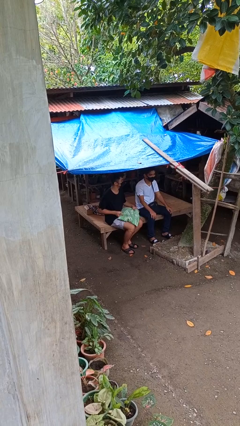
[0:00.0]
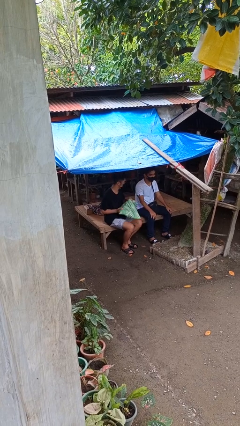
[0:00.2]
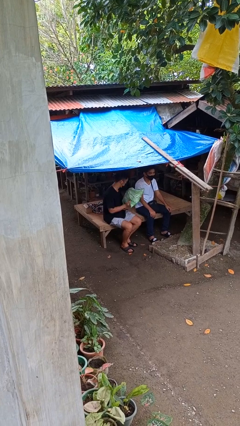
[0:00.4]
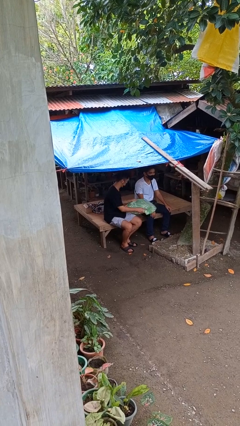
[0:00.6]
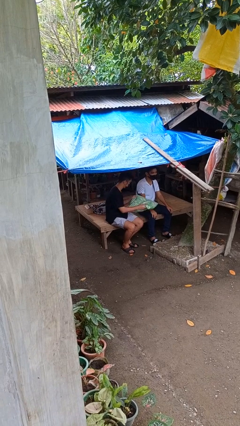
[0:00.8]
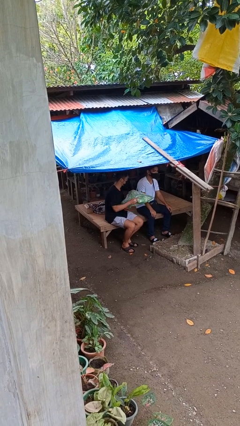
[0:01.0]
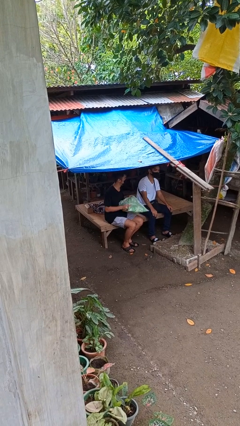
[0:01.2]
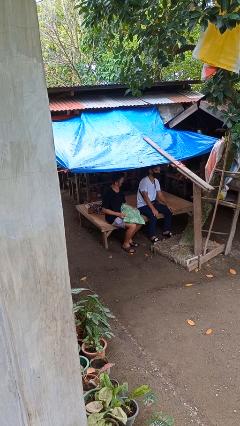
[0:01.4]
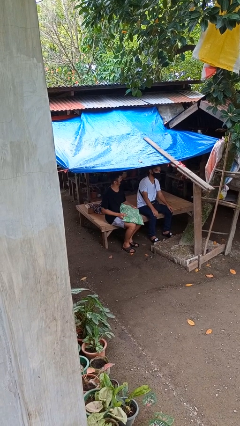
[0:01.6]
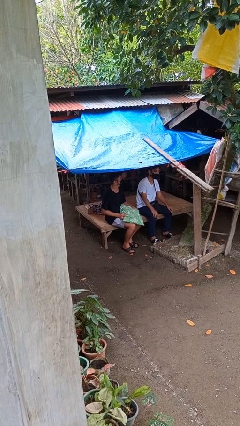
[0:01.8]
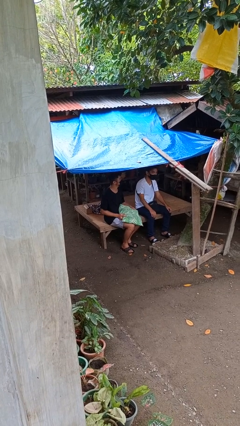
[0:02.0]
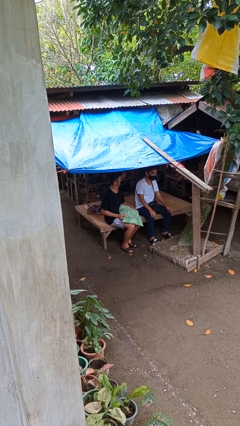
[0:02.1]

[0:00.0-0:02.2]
person hits person with pillow

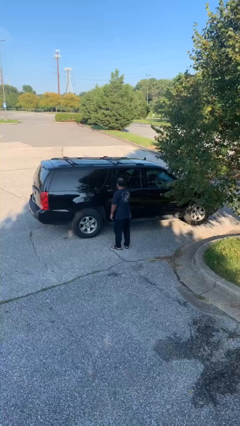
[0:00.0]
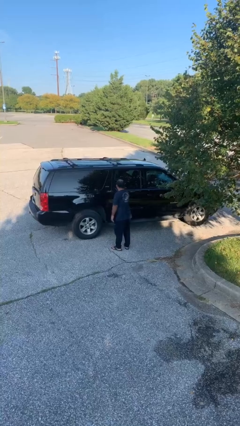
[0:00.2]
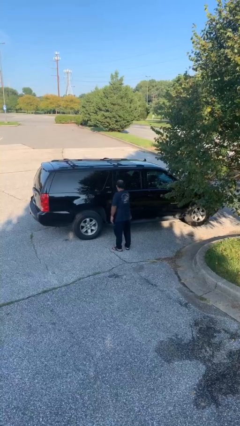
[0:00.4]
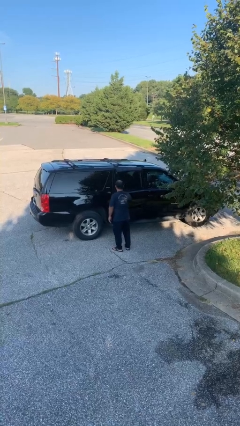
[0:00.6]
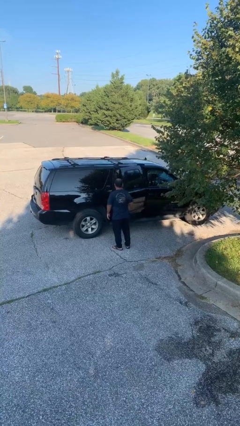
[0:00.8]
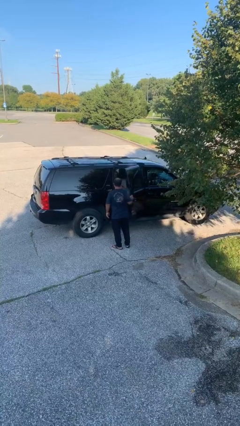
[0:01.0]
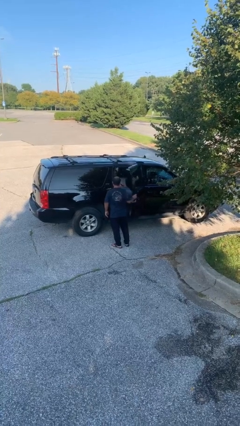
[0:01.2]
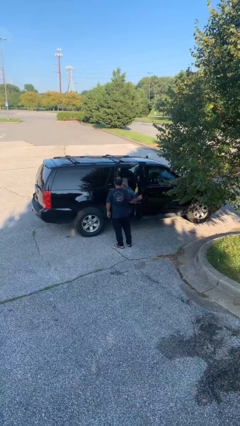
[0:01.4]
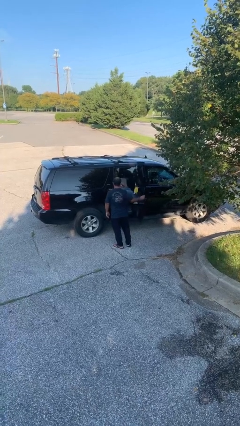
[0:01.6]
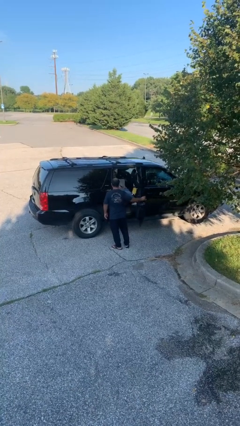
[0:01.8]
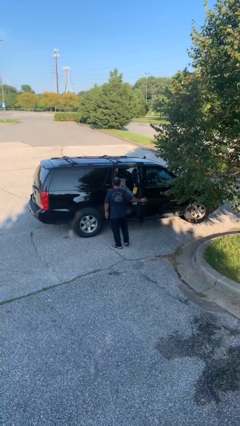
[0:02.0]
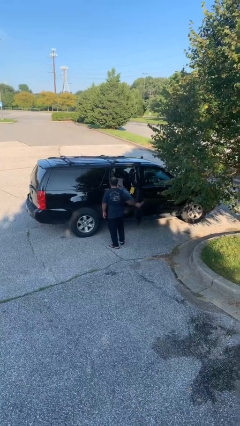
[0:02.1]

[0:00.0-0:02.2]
person opens car door

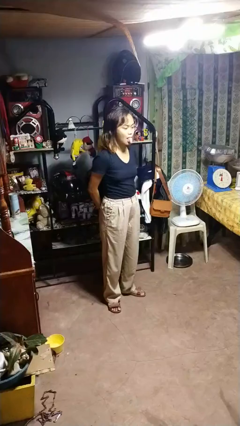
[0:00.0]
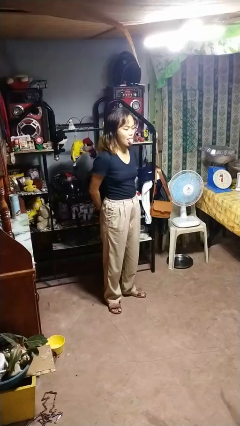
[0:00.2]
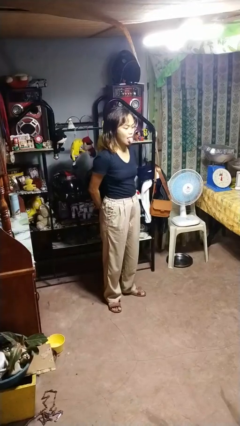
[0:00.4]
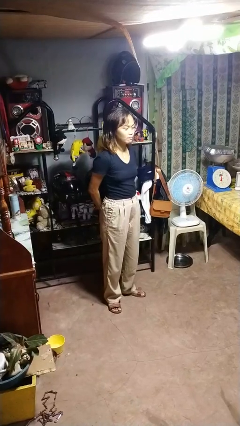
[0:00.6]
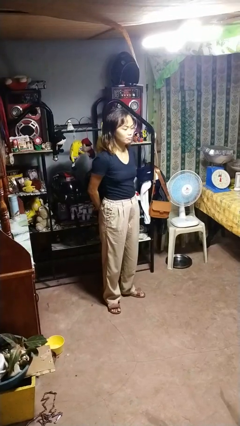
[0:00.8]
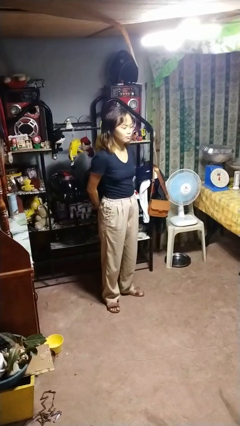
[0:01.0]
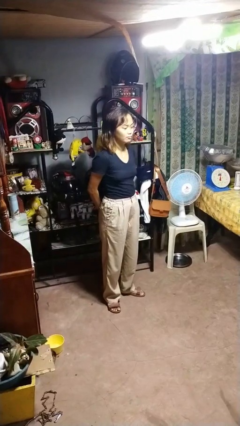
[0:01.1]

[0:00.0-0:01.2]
person sticks out tongue

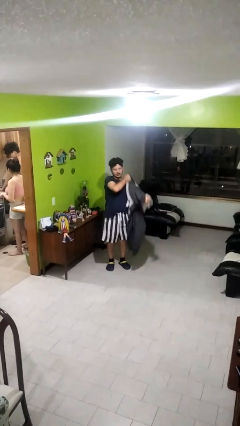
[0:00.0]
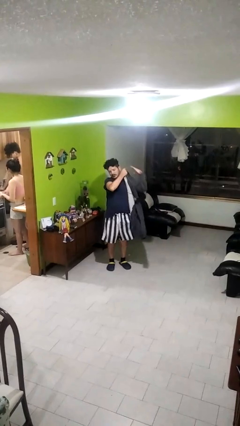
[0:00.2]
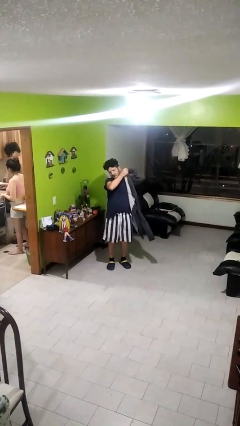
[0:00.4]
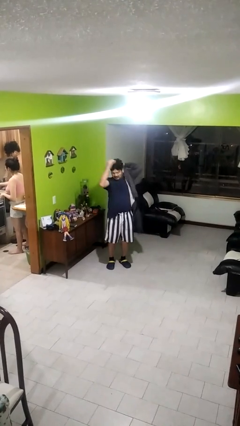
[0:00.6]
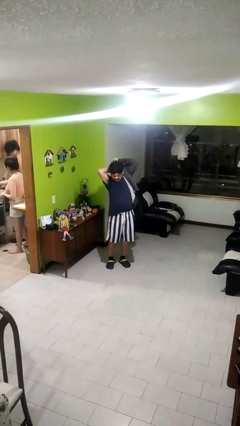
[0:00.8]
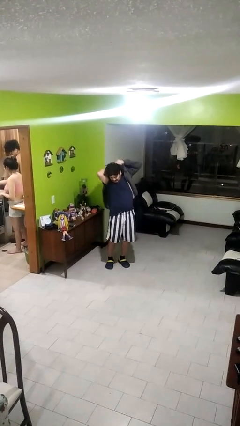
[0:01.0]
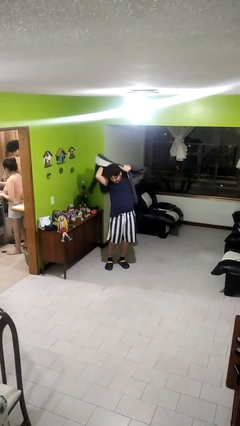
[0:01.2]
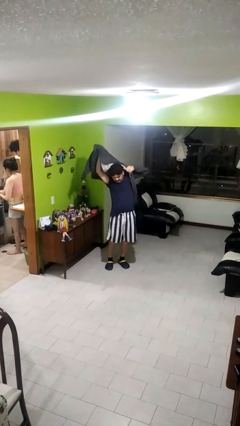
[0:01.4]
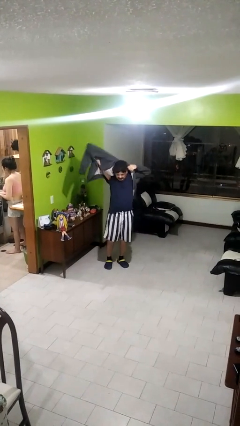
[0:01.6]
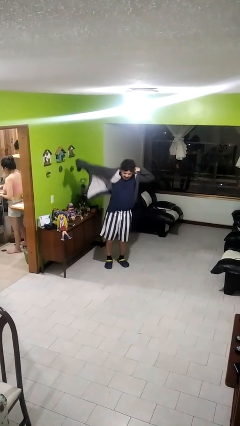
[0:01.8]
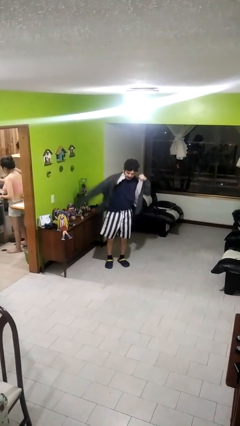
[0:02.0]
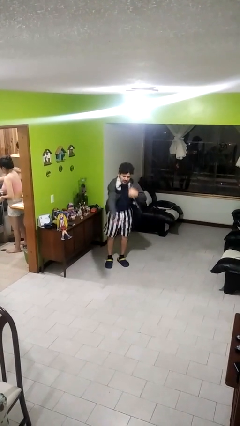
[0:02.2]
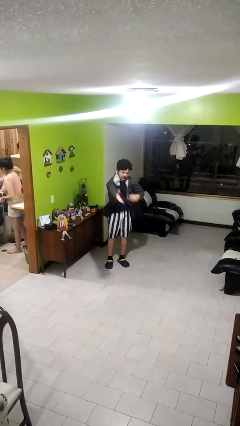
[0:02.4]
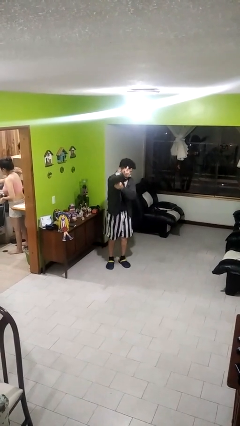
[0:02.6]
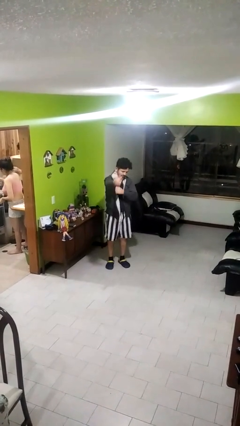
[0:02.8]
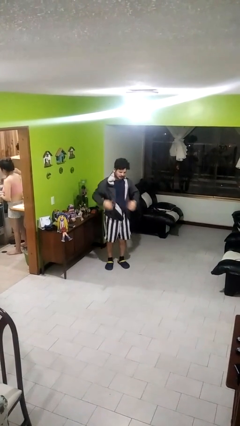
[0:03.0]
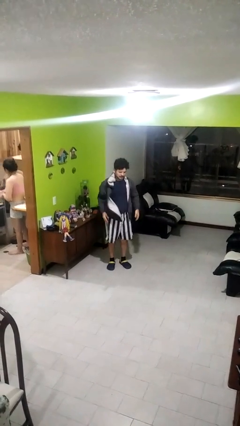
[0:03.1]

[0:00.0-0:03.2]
person puts on jacket

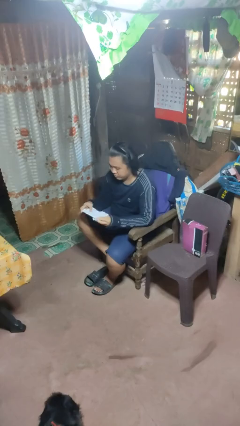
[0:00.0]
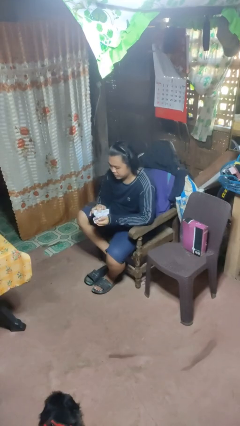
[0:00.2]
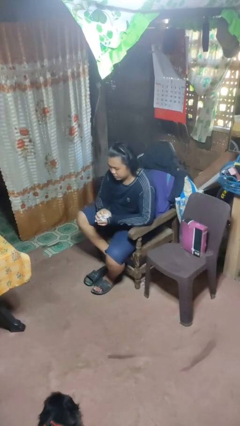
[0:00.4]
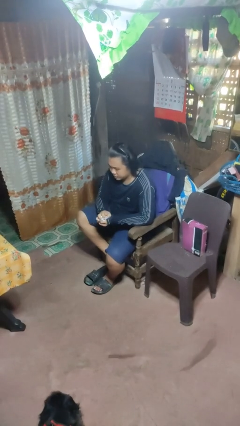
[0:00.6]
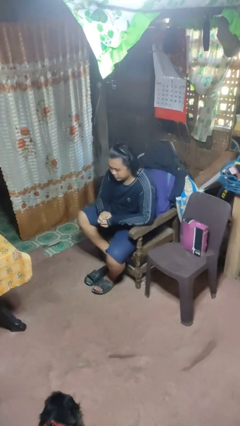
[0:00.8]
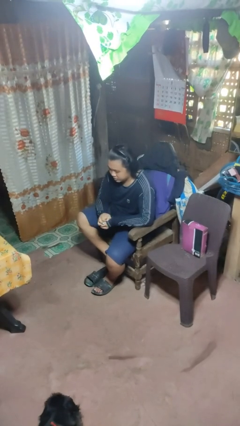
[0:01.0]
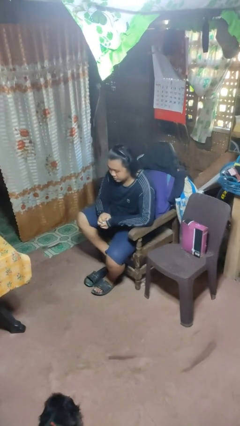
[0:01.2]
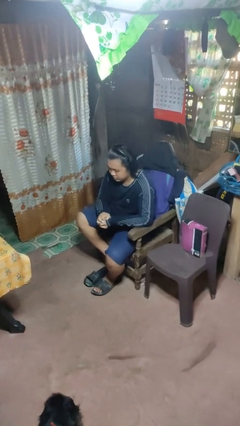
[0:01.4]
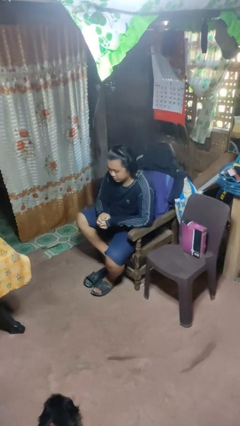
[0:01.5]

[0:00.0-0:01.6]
person crumples paper

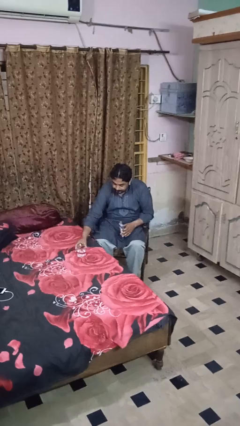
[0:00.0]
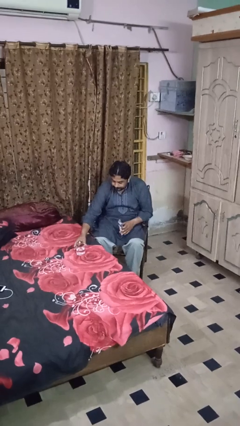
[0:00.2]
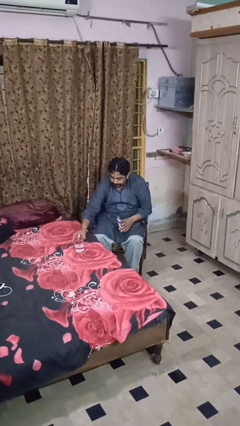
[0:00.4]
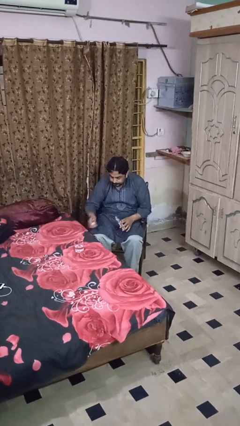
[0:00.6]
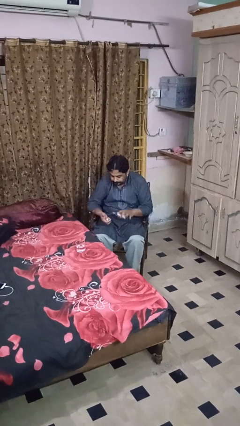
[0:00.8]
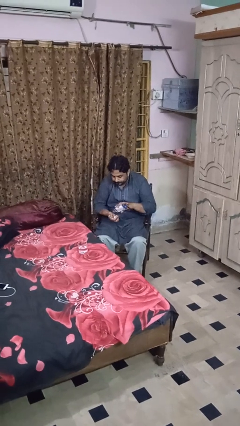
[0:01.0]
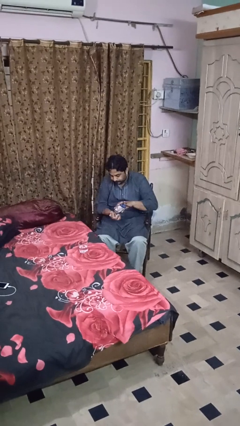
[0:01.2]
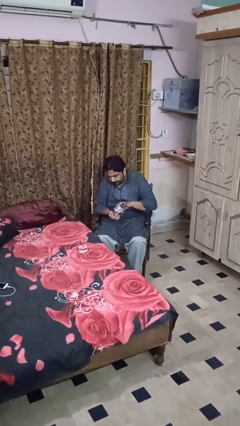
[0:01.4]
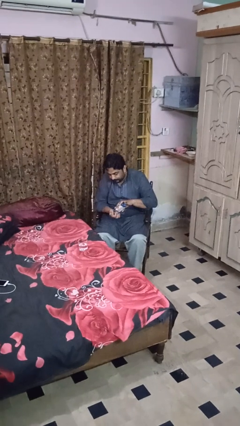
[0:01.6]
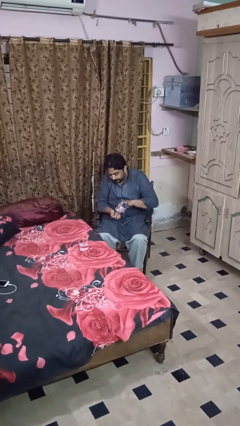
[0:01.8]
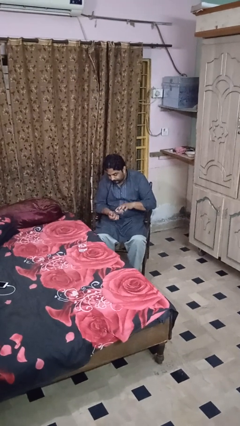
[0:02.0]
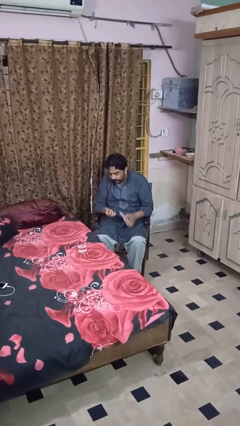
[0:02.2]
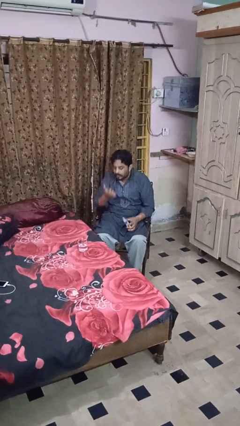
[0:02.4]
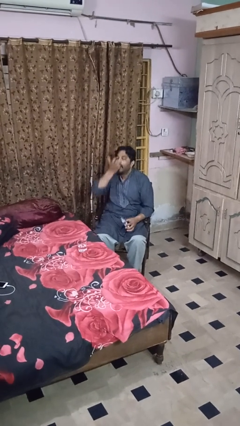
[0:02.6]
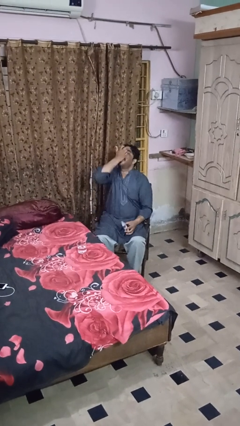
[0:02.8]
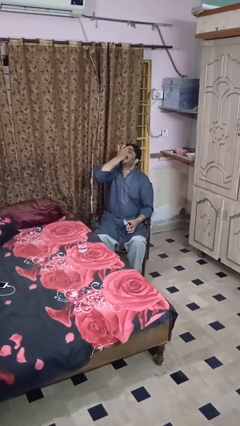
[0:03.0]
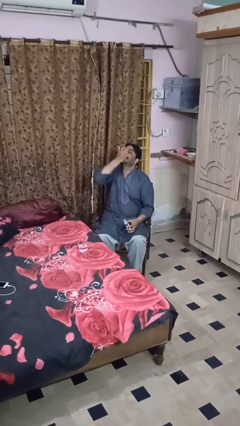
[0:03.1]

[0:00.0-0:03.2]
person takes medicine pills

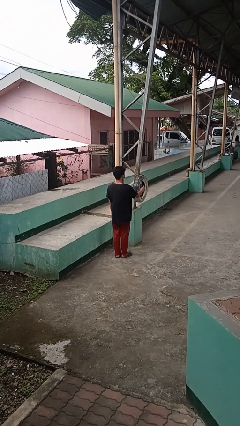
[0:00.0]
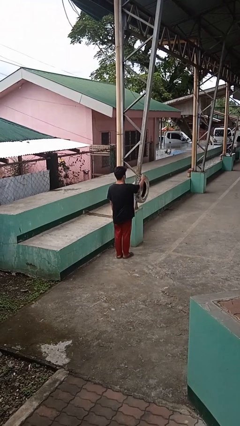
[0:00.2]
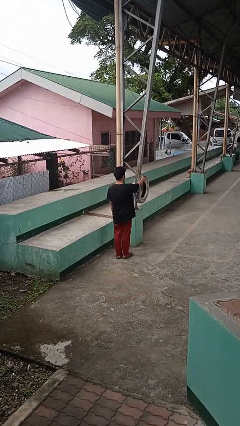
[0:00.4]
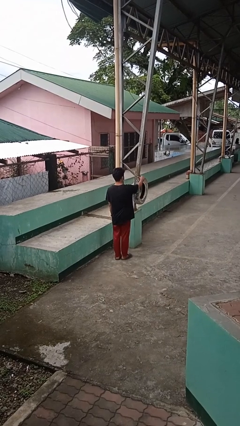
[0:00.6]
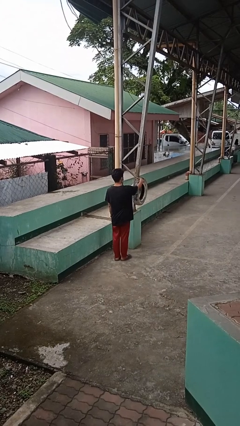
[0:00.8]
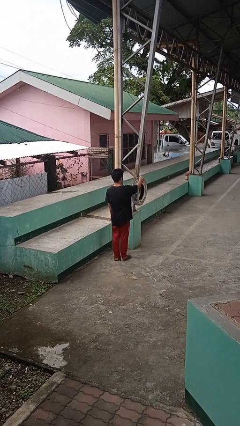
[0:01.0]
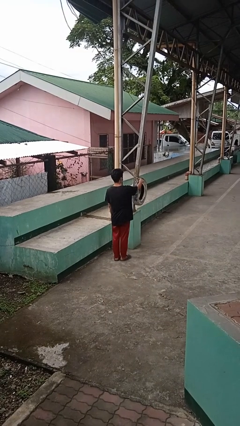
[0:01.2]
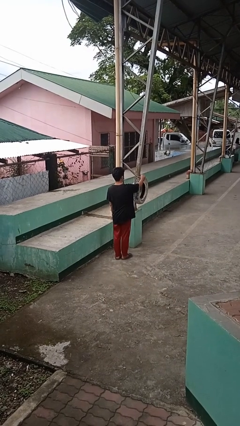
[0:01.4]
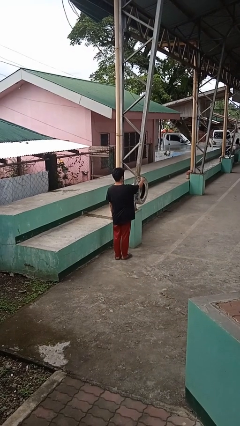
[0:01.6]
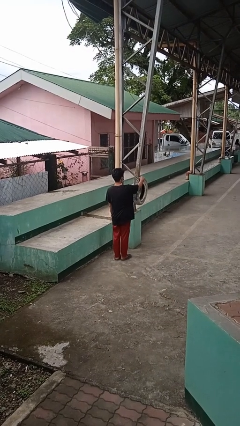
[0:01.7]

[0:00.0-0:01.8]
person taps object with finger

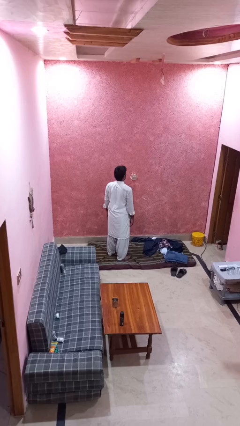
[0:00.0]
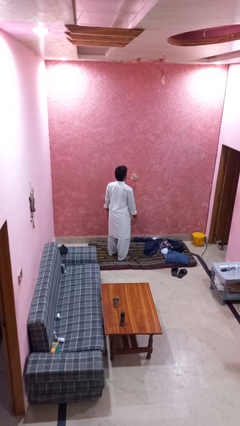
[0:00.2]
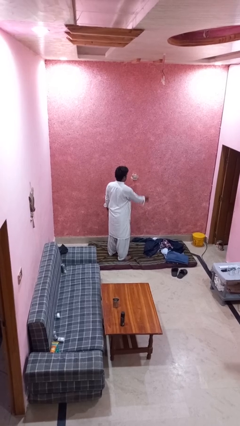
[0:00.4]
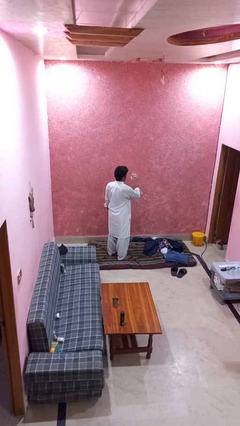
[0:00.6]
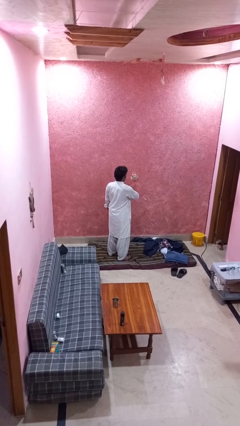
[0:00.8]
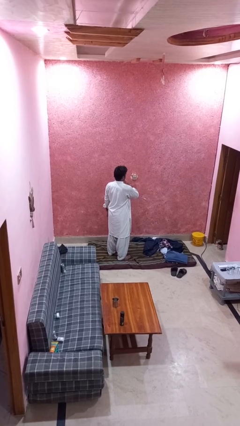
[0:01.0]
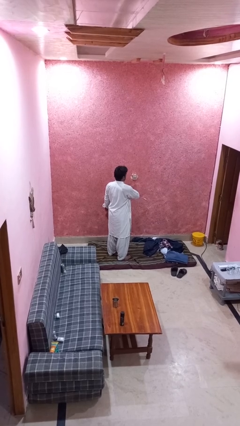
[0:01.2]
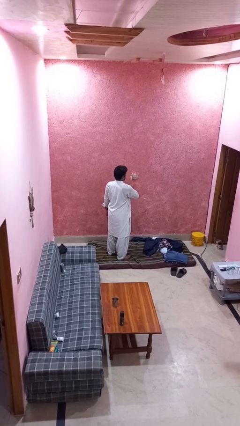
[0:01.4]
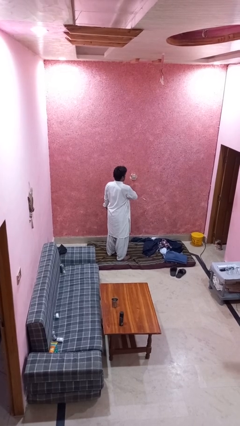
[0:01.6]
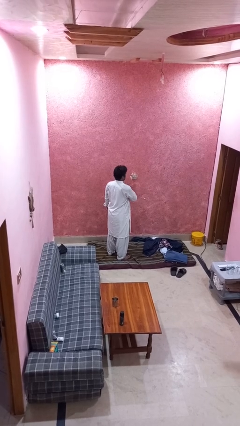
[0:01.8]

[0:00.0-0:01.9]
person drums on chest
